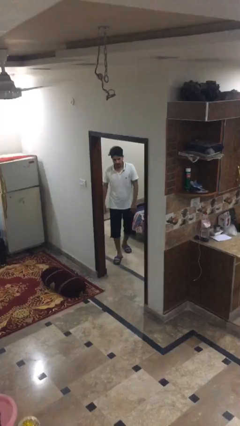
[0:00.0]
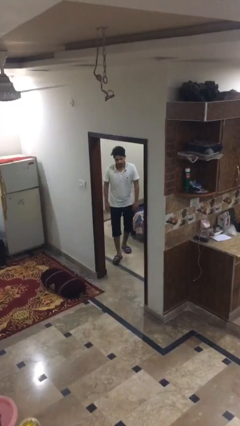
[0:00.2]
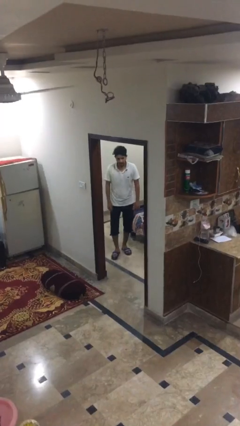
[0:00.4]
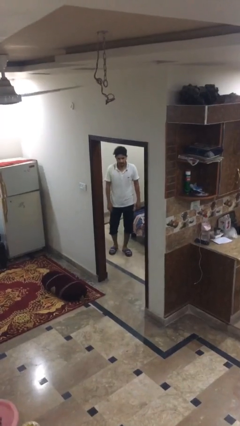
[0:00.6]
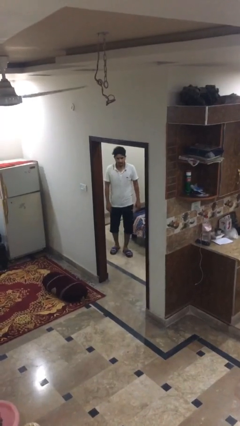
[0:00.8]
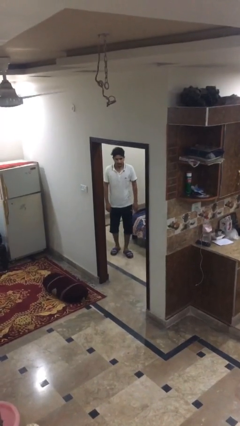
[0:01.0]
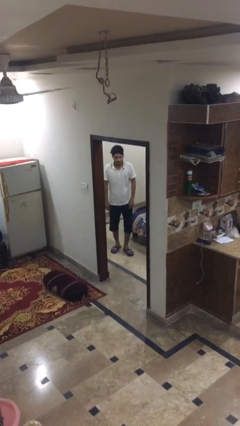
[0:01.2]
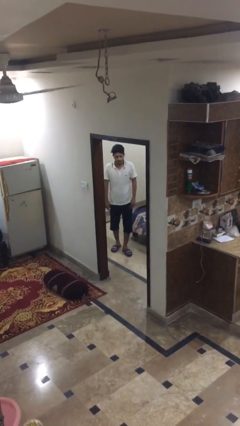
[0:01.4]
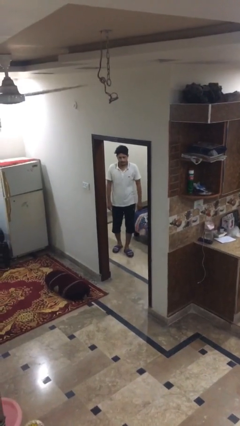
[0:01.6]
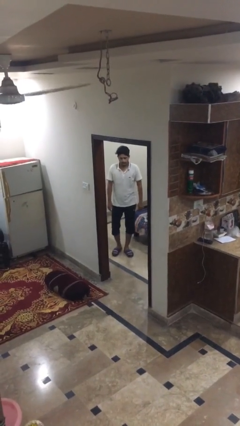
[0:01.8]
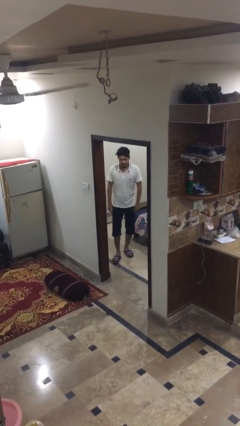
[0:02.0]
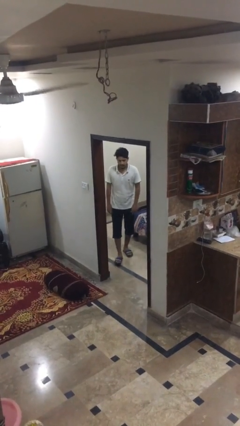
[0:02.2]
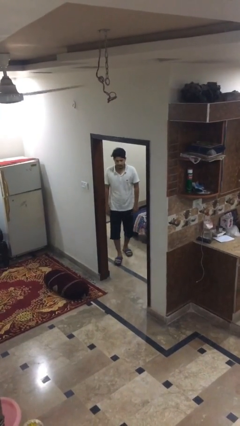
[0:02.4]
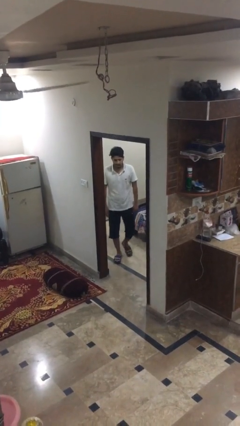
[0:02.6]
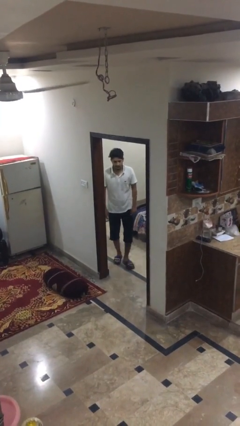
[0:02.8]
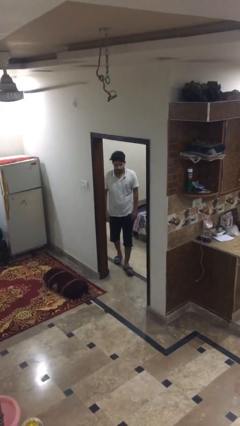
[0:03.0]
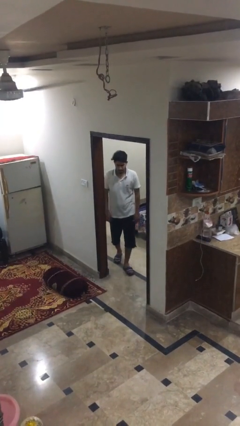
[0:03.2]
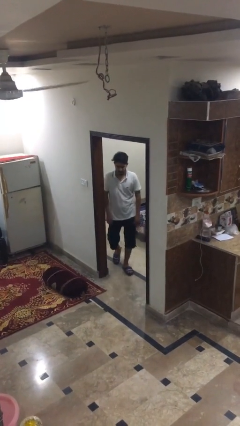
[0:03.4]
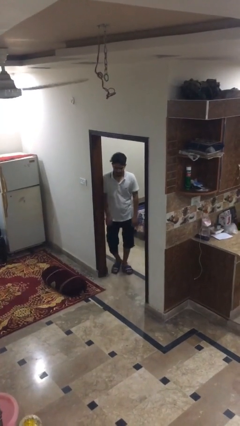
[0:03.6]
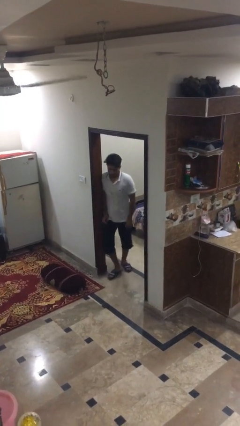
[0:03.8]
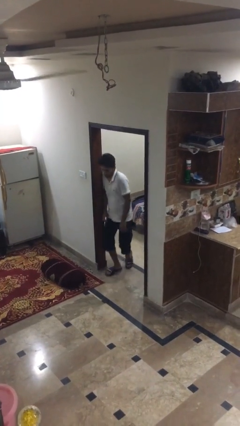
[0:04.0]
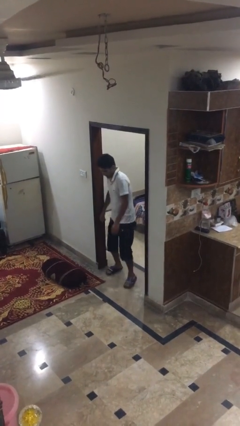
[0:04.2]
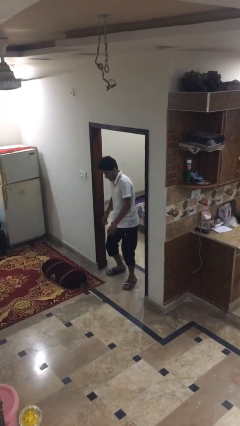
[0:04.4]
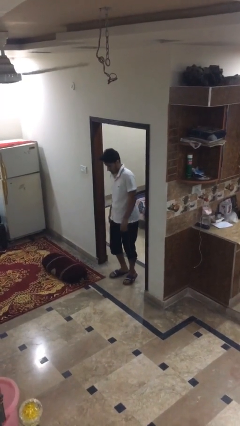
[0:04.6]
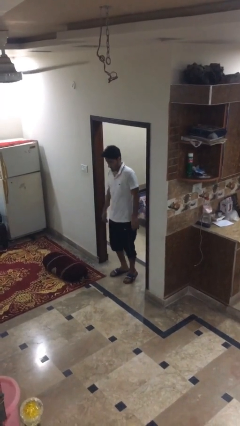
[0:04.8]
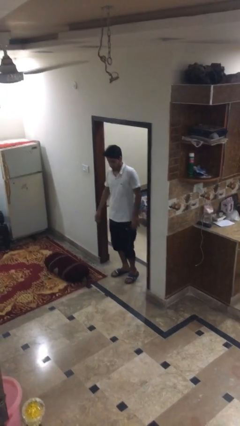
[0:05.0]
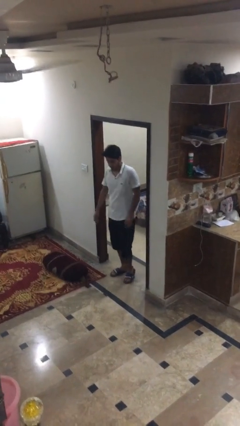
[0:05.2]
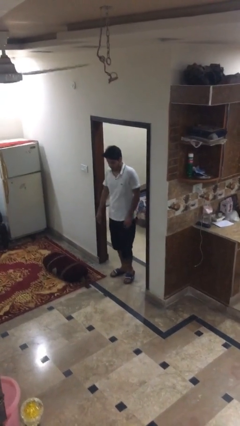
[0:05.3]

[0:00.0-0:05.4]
person bumps into wall

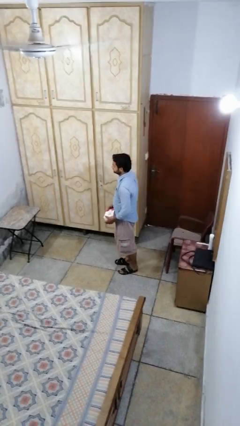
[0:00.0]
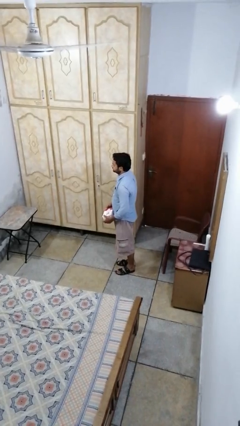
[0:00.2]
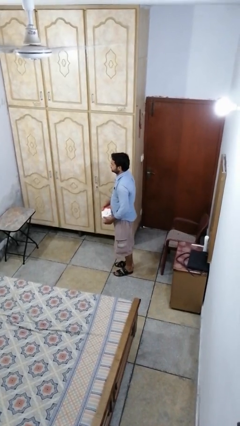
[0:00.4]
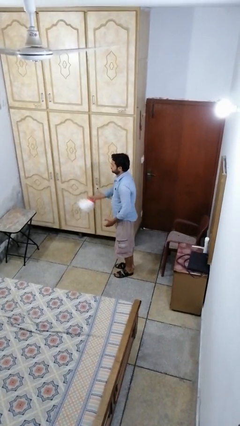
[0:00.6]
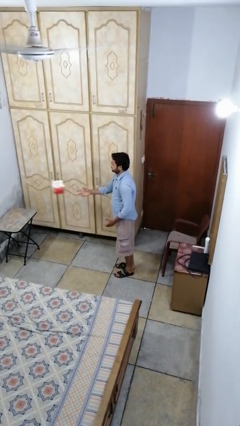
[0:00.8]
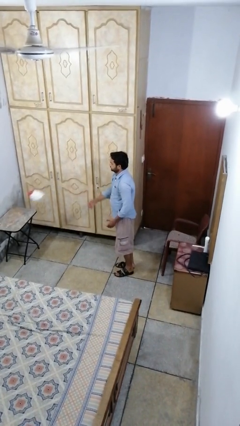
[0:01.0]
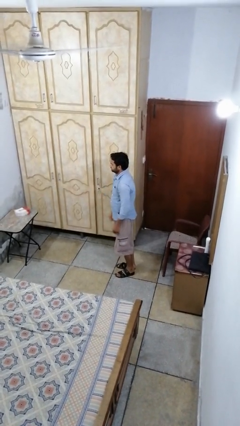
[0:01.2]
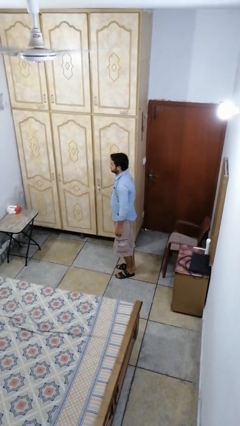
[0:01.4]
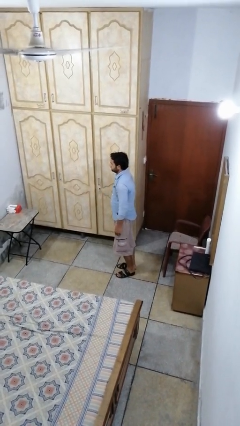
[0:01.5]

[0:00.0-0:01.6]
person throws object on table

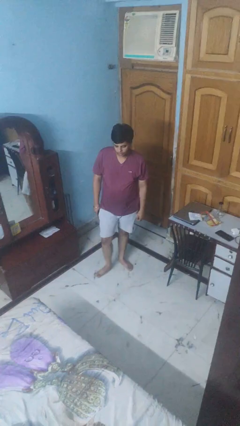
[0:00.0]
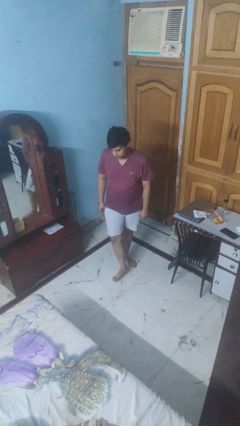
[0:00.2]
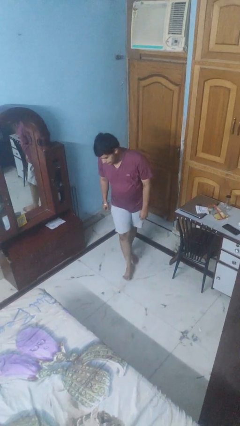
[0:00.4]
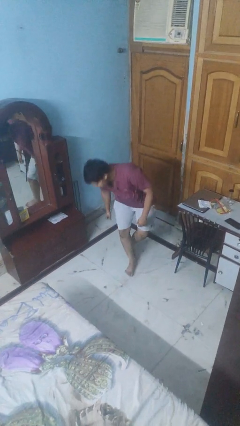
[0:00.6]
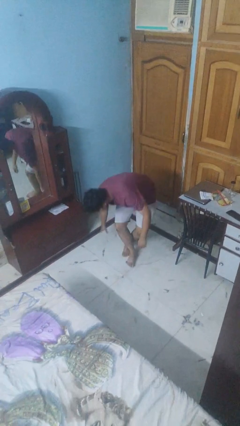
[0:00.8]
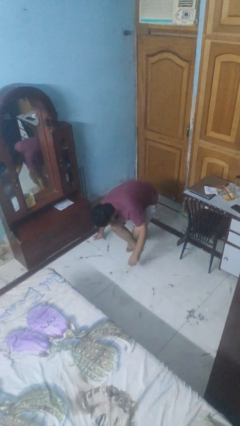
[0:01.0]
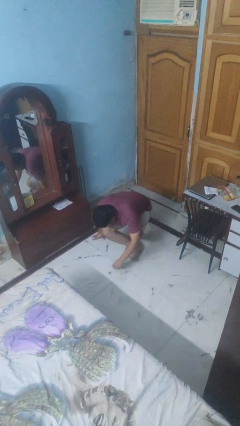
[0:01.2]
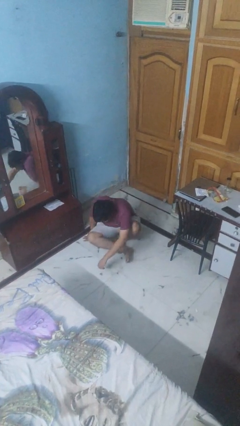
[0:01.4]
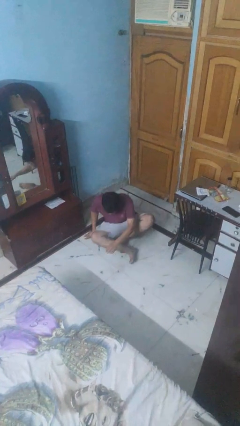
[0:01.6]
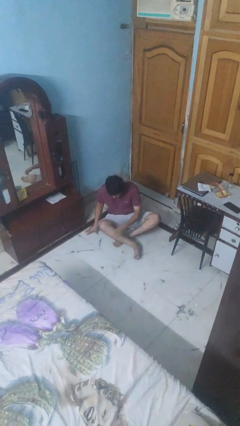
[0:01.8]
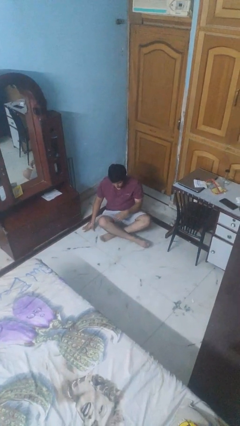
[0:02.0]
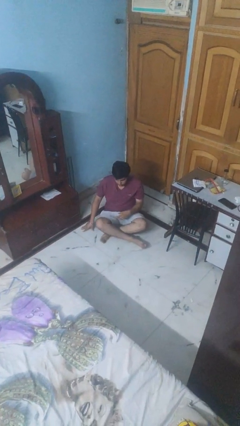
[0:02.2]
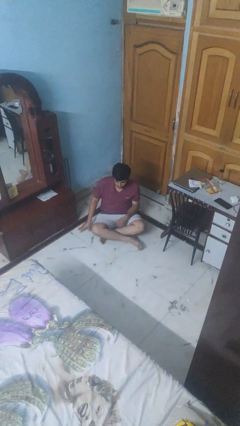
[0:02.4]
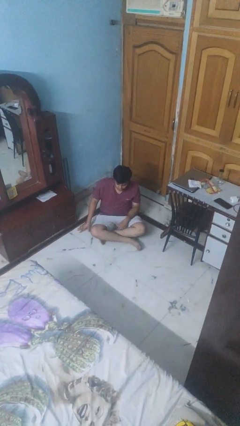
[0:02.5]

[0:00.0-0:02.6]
person sits crisscross

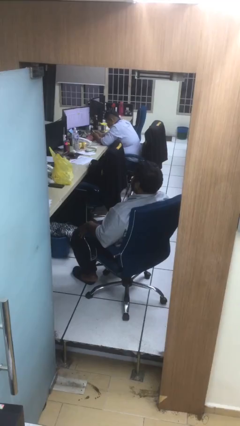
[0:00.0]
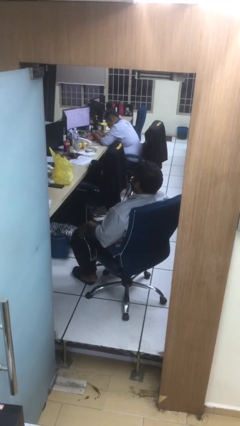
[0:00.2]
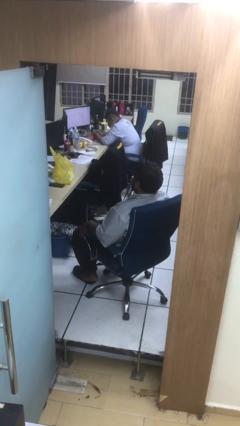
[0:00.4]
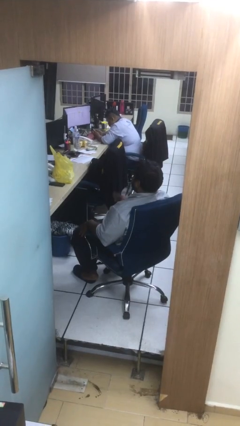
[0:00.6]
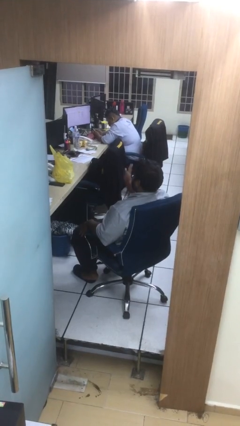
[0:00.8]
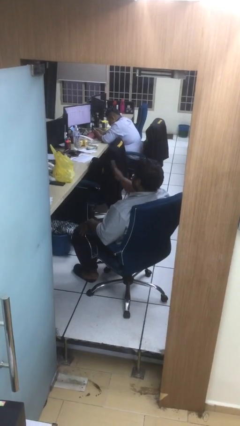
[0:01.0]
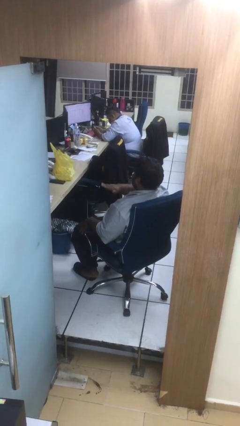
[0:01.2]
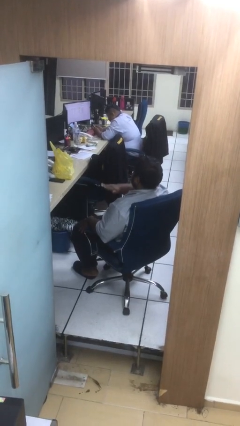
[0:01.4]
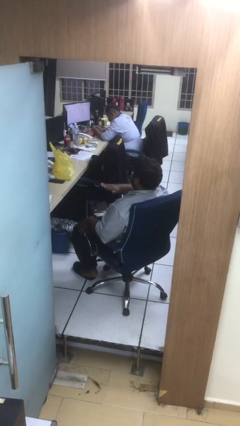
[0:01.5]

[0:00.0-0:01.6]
person gestures swipe left

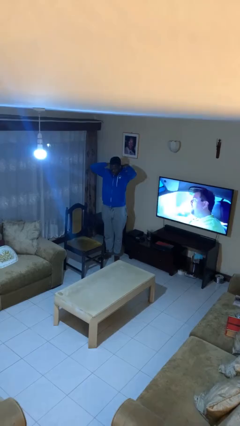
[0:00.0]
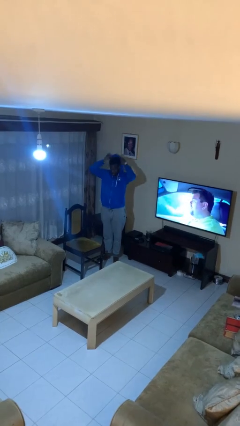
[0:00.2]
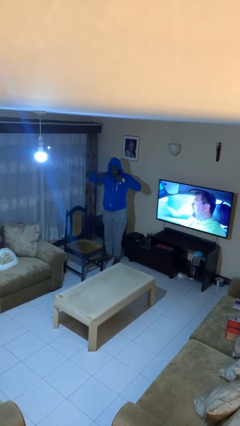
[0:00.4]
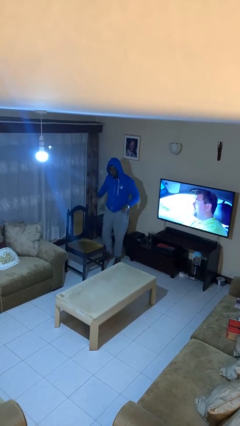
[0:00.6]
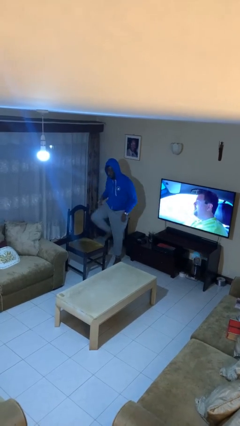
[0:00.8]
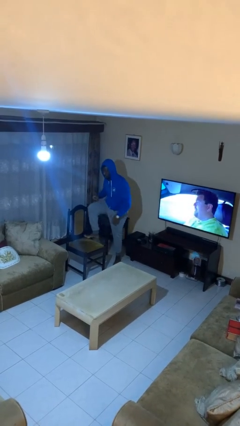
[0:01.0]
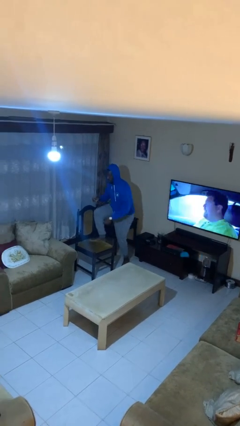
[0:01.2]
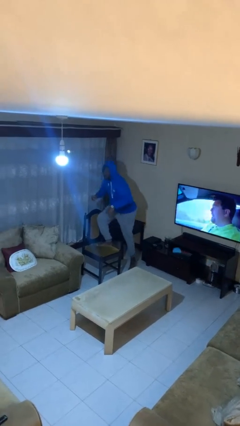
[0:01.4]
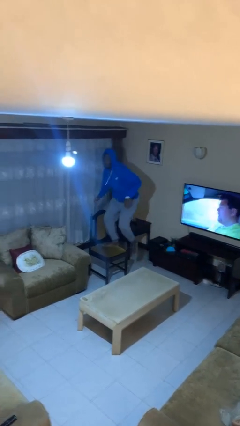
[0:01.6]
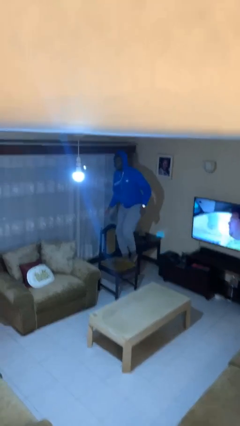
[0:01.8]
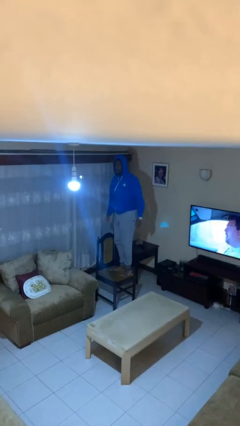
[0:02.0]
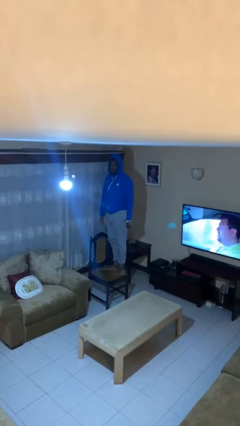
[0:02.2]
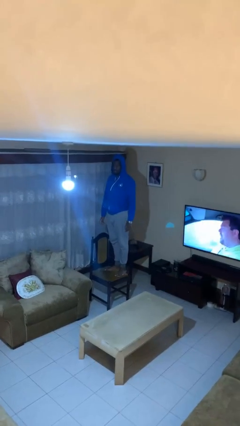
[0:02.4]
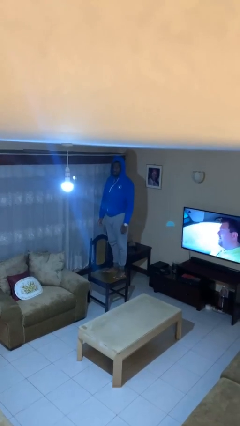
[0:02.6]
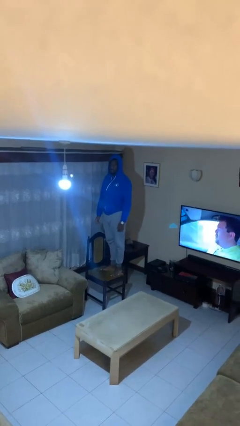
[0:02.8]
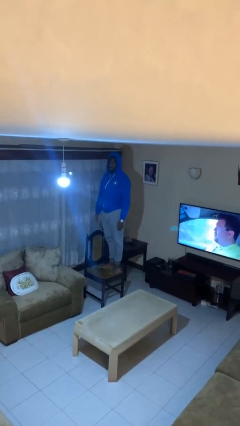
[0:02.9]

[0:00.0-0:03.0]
person climbs on chair

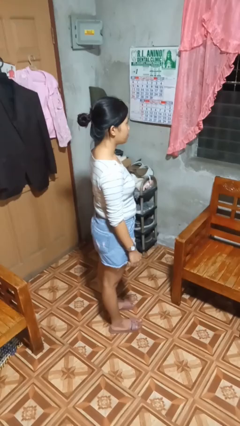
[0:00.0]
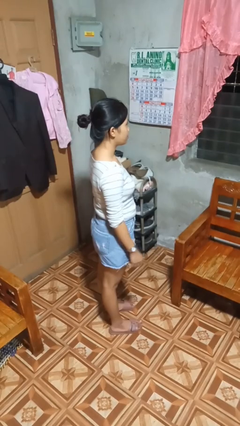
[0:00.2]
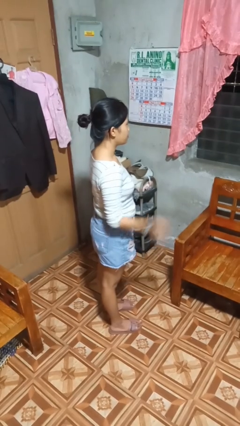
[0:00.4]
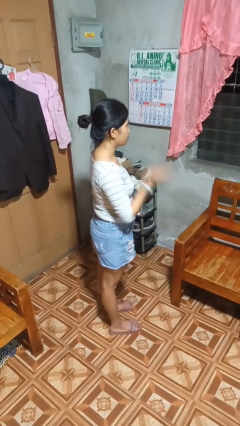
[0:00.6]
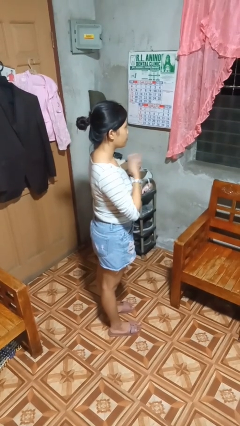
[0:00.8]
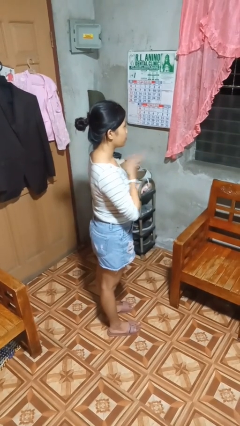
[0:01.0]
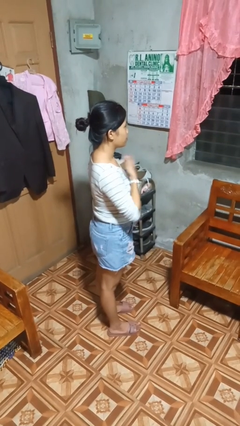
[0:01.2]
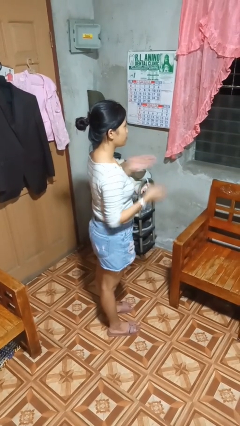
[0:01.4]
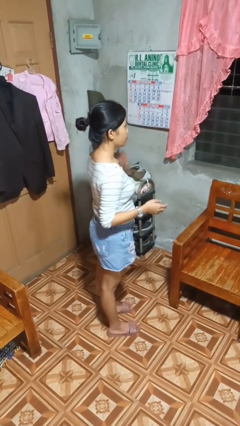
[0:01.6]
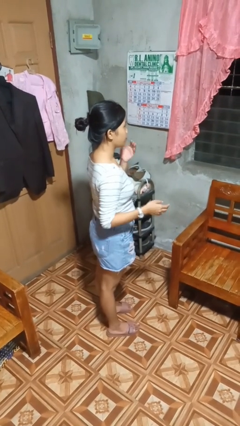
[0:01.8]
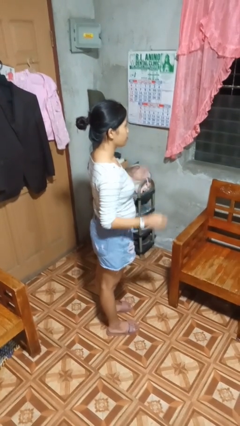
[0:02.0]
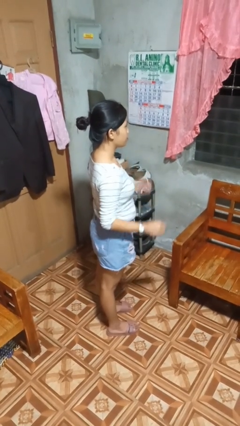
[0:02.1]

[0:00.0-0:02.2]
person drums on chest

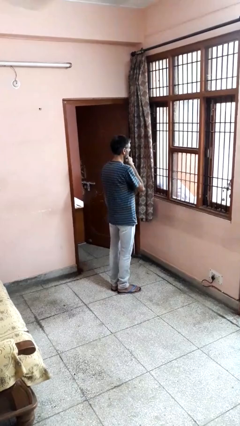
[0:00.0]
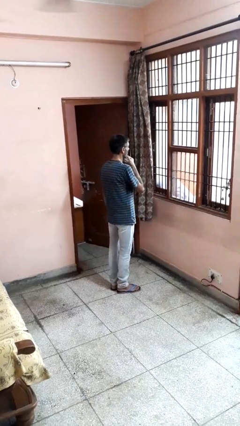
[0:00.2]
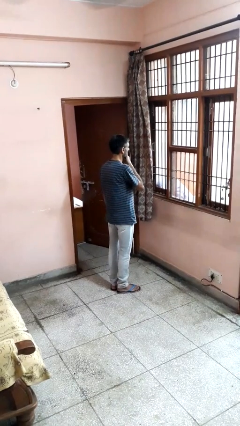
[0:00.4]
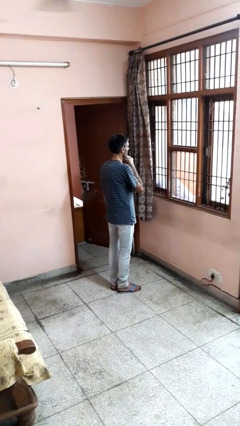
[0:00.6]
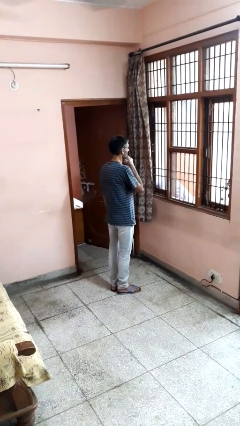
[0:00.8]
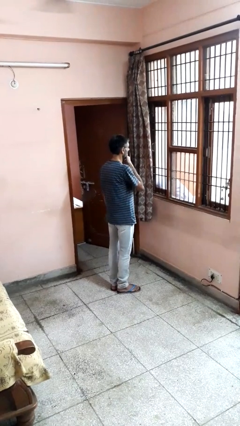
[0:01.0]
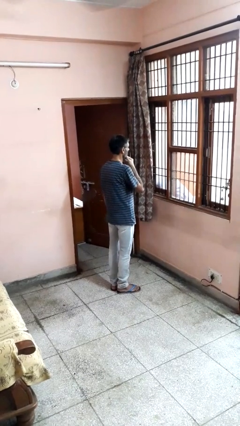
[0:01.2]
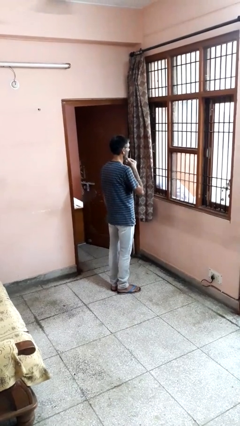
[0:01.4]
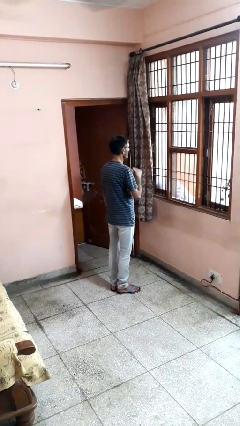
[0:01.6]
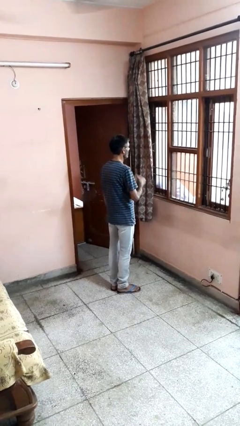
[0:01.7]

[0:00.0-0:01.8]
person strokes chin
